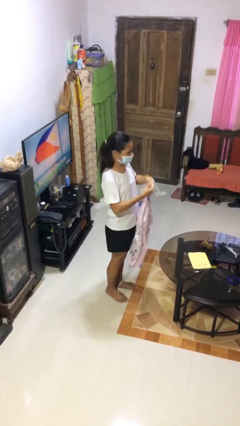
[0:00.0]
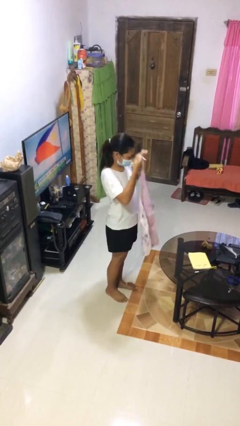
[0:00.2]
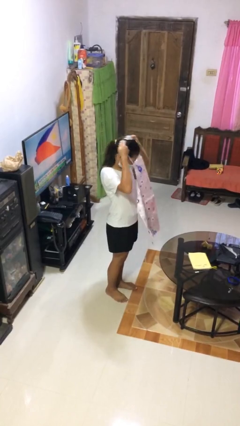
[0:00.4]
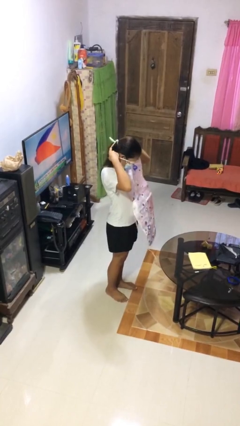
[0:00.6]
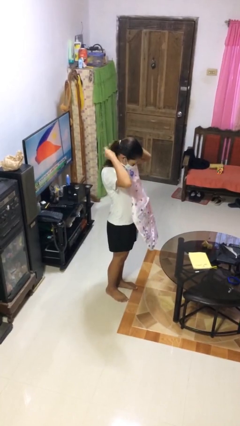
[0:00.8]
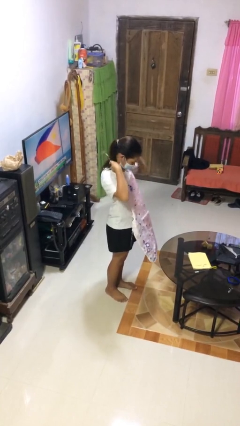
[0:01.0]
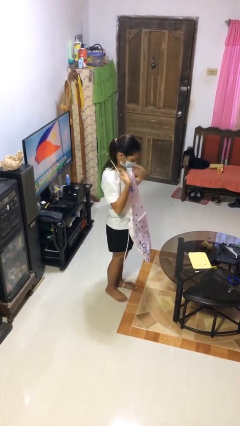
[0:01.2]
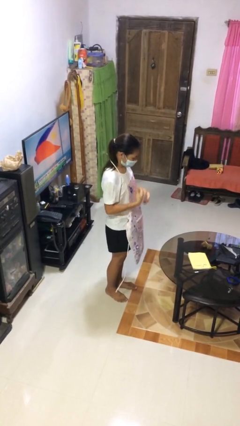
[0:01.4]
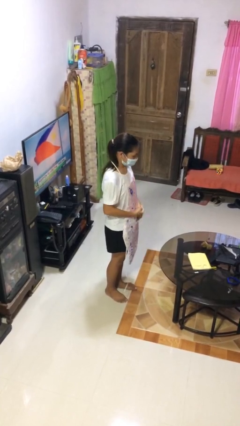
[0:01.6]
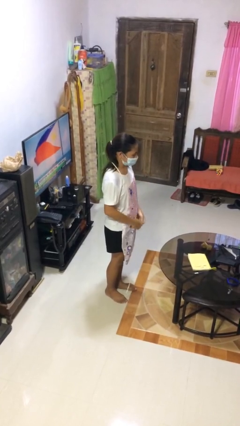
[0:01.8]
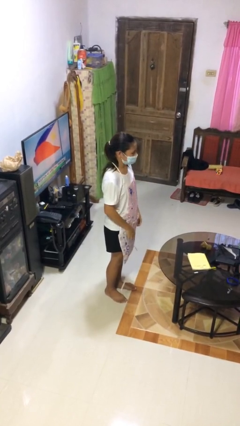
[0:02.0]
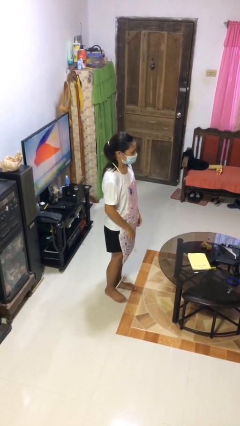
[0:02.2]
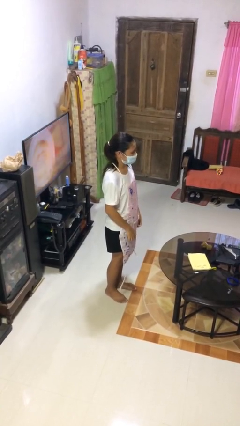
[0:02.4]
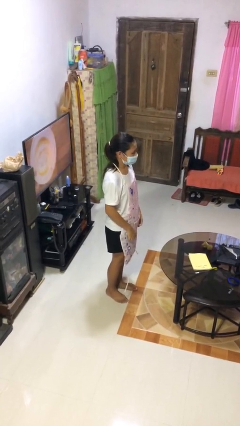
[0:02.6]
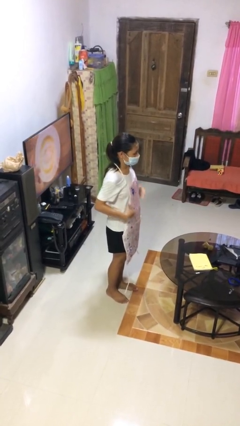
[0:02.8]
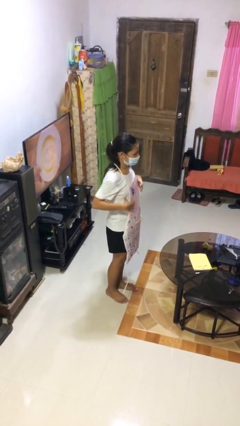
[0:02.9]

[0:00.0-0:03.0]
person puts on apron

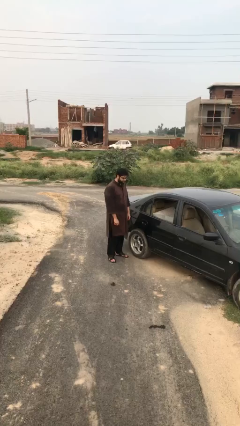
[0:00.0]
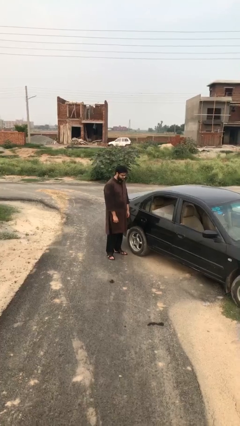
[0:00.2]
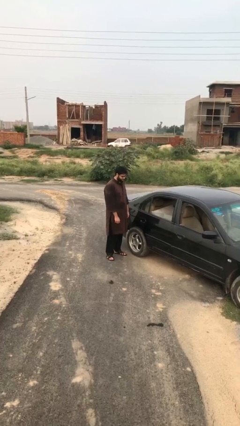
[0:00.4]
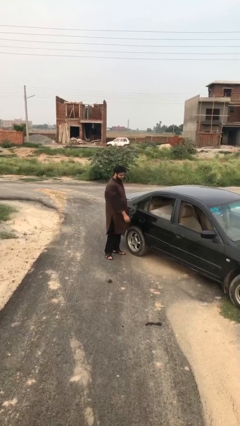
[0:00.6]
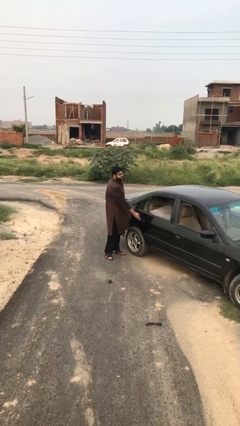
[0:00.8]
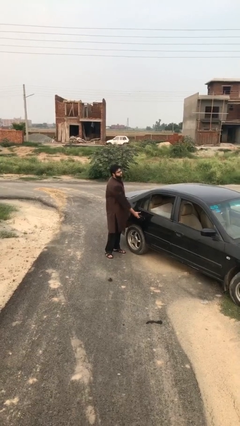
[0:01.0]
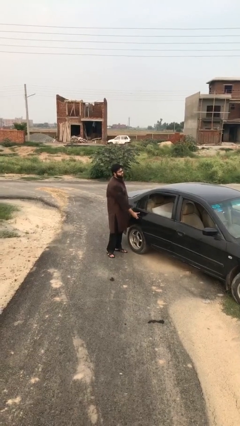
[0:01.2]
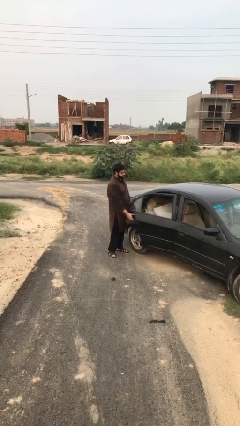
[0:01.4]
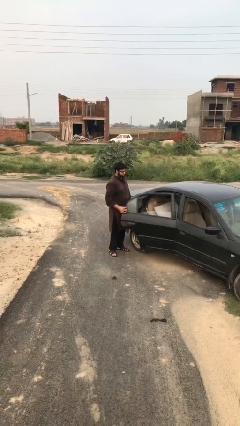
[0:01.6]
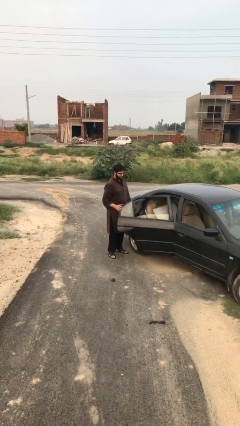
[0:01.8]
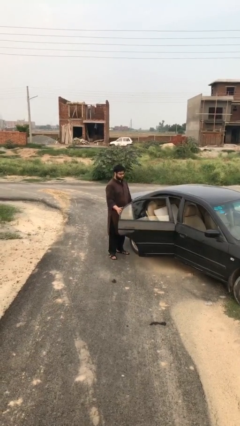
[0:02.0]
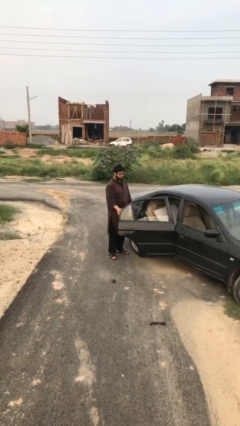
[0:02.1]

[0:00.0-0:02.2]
person opens car door

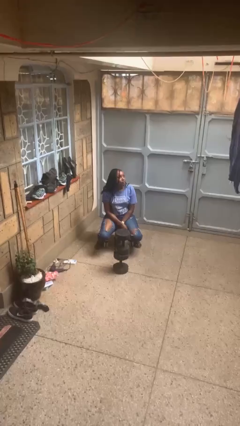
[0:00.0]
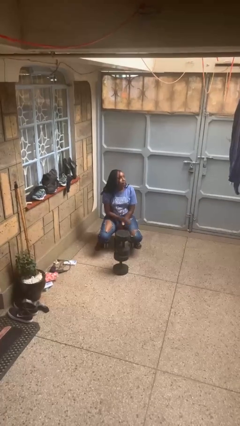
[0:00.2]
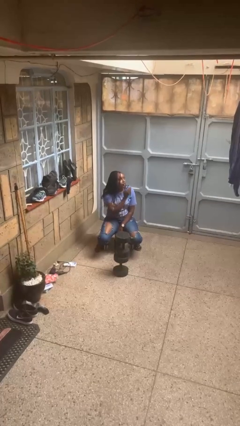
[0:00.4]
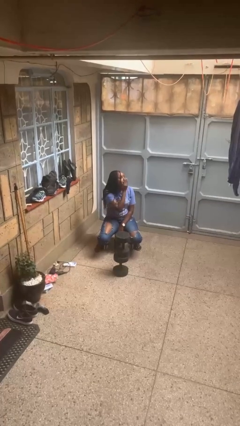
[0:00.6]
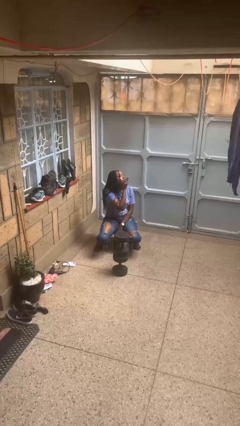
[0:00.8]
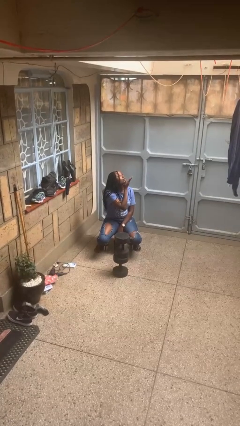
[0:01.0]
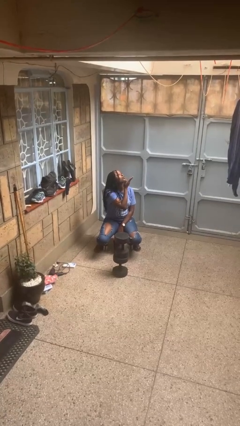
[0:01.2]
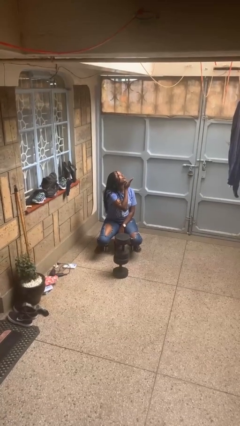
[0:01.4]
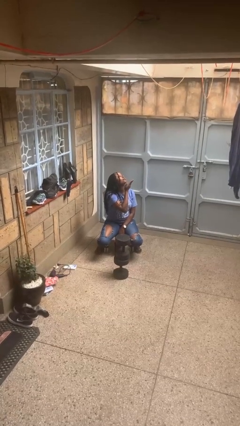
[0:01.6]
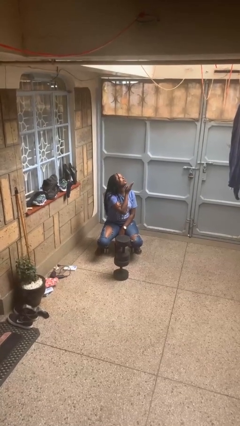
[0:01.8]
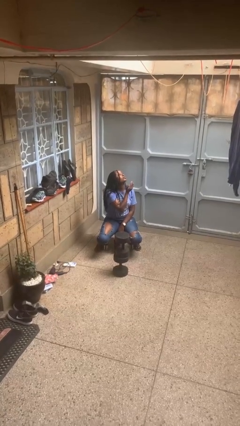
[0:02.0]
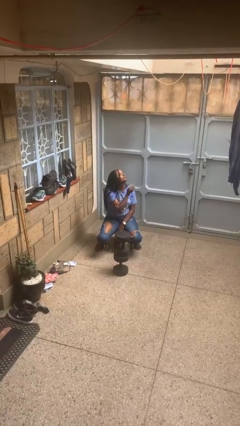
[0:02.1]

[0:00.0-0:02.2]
person gestures blow kiss

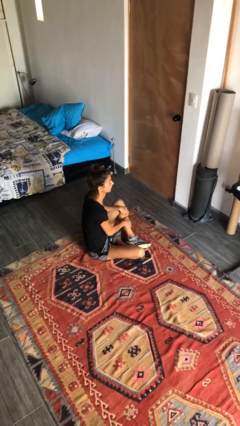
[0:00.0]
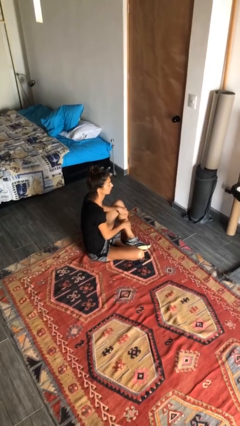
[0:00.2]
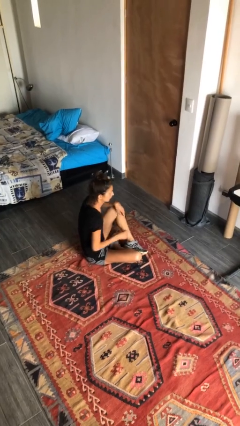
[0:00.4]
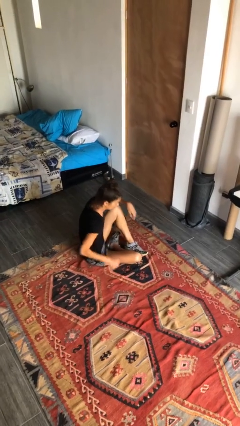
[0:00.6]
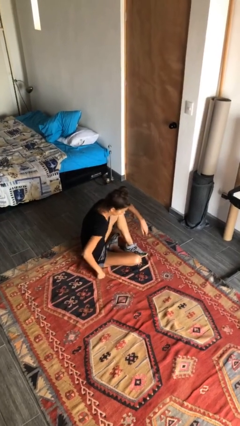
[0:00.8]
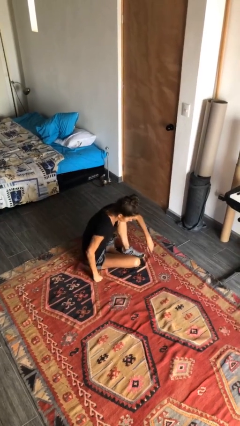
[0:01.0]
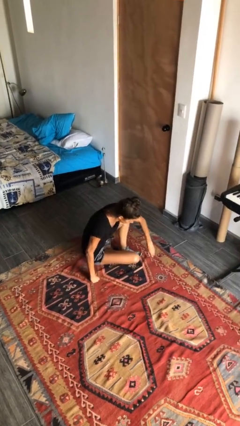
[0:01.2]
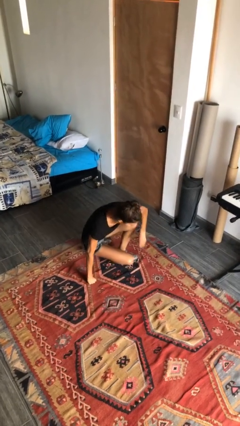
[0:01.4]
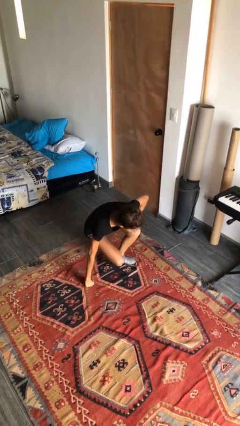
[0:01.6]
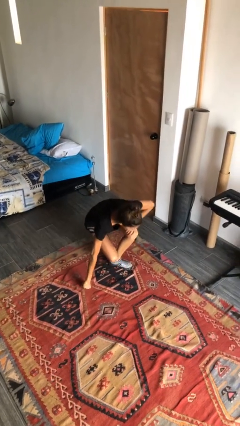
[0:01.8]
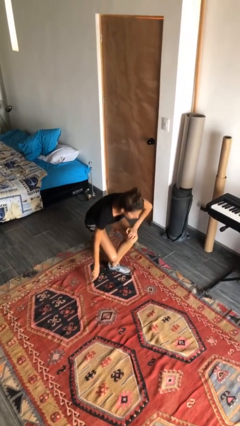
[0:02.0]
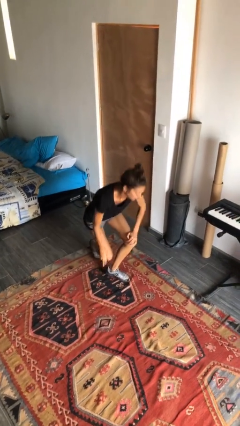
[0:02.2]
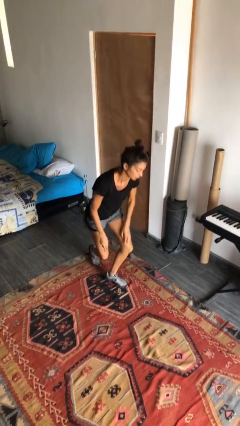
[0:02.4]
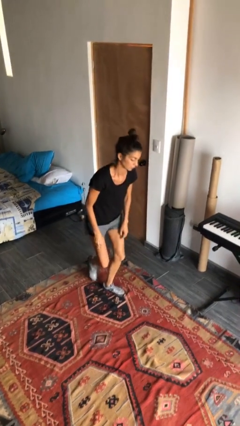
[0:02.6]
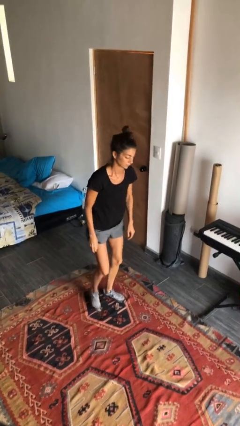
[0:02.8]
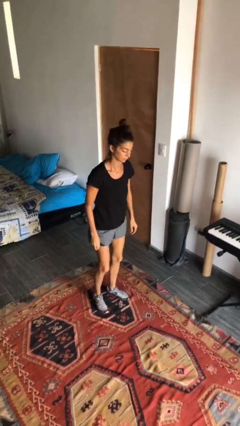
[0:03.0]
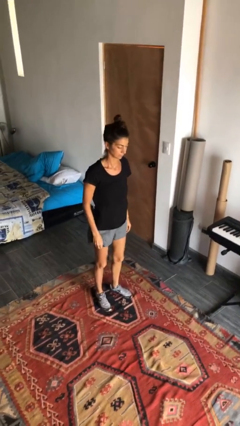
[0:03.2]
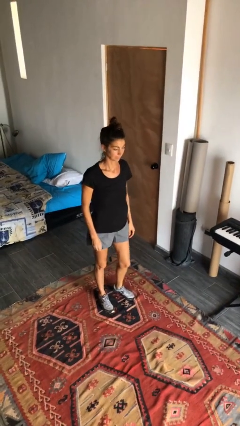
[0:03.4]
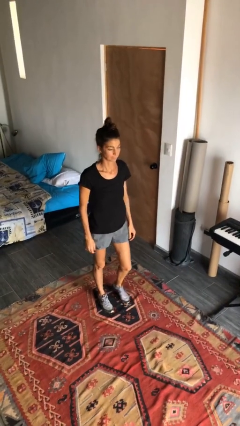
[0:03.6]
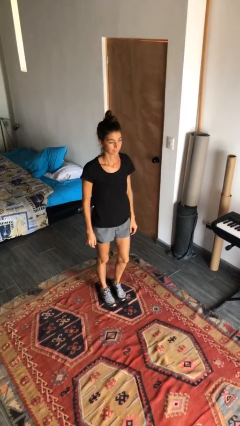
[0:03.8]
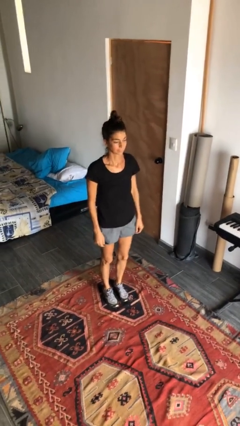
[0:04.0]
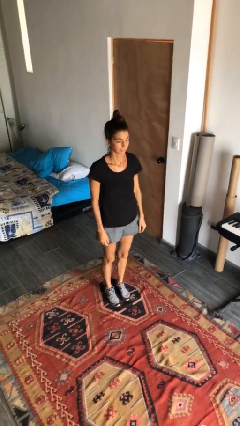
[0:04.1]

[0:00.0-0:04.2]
person stands up from floor

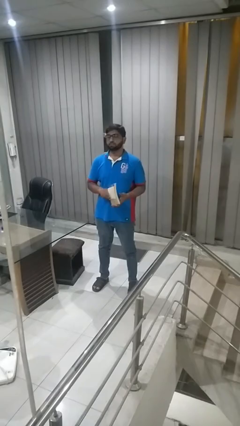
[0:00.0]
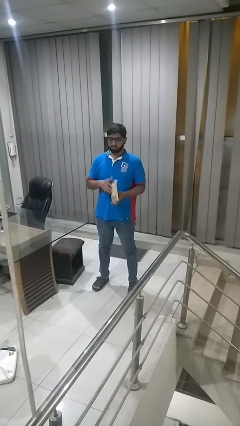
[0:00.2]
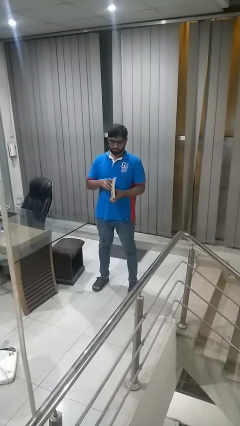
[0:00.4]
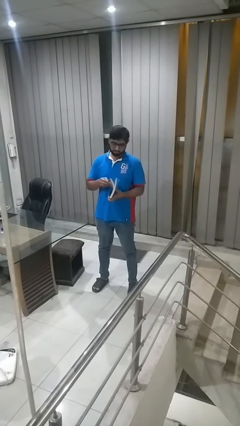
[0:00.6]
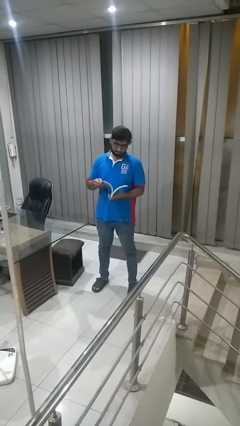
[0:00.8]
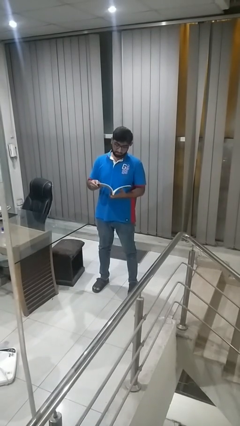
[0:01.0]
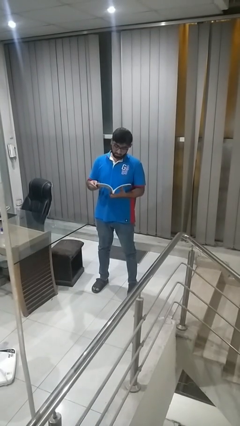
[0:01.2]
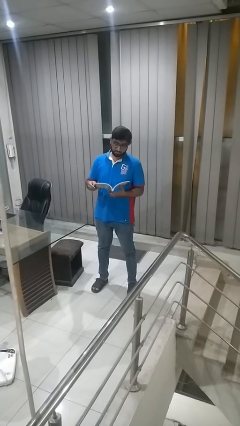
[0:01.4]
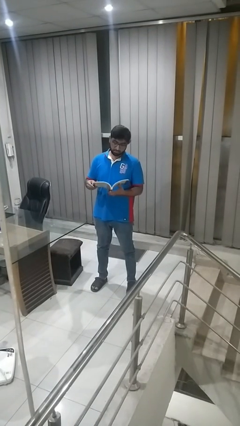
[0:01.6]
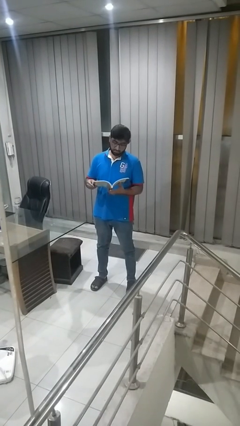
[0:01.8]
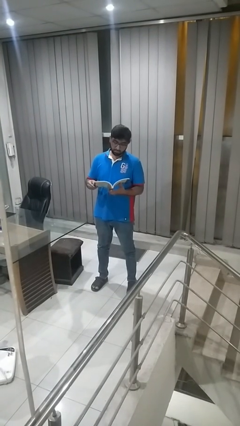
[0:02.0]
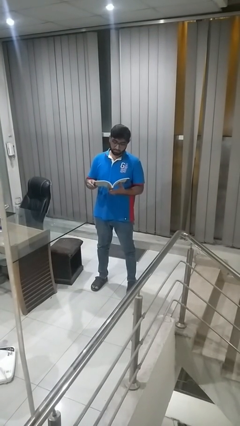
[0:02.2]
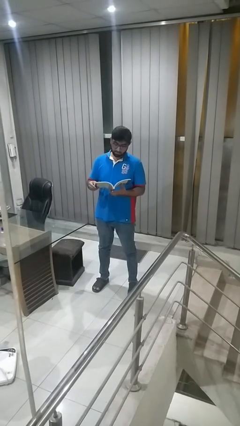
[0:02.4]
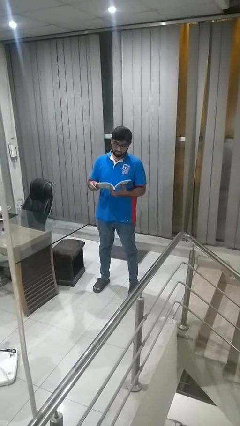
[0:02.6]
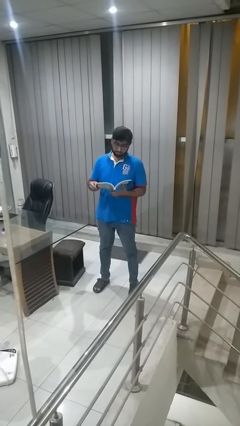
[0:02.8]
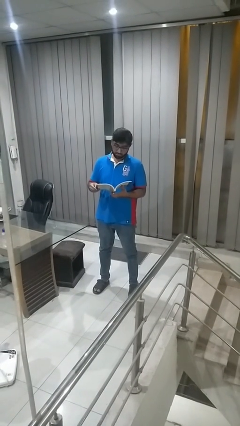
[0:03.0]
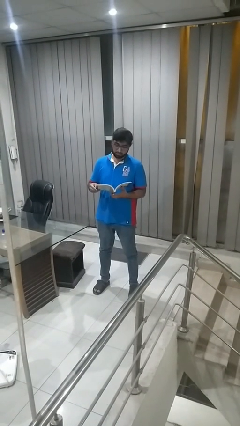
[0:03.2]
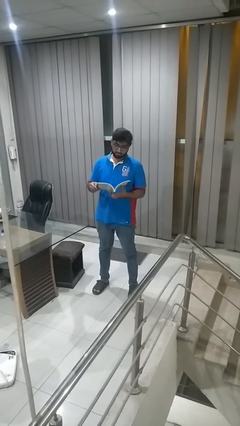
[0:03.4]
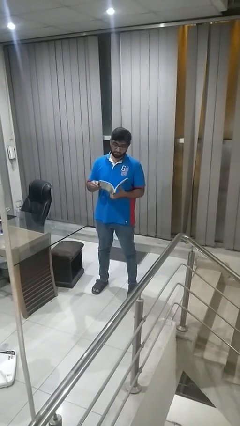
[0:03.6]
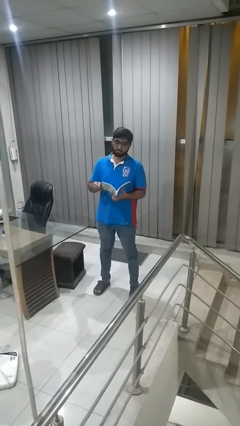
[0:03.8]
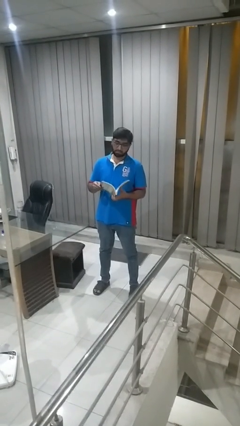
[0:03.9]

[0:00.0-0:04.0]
person reads book

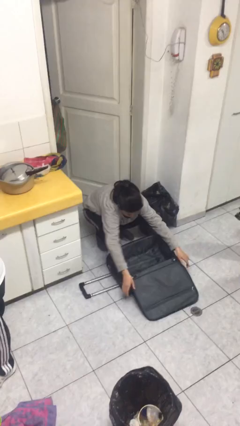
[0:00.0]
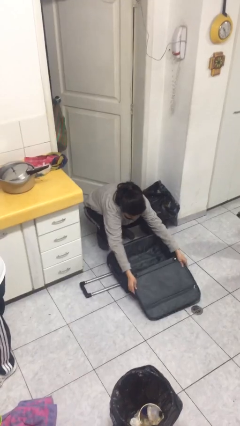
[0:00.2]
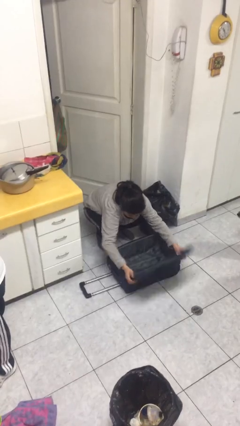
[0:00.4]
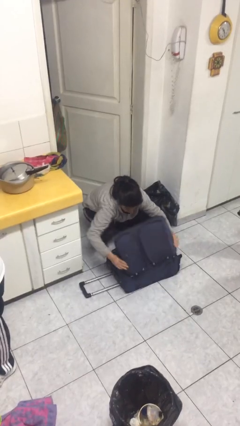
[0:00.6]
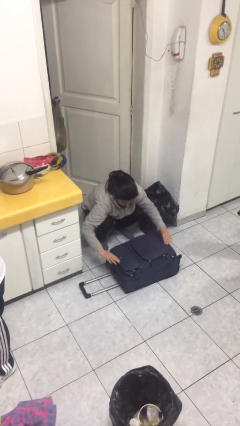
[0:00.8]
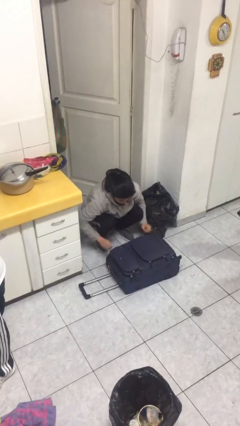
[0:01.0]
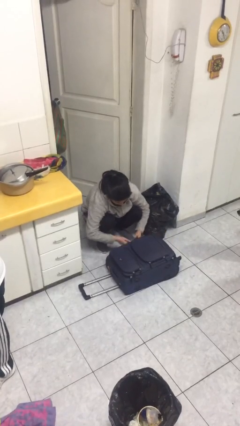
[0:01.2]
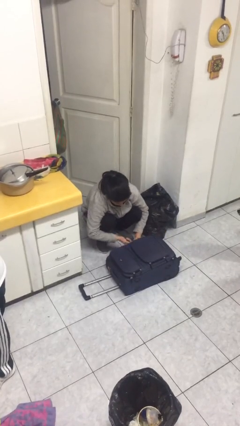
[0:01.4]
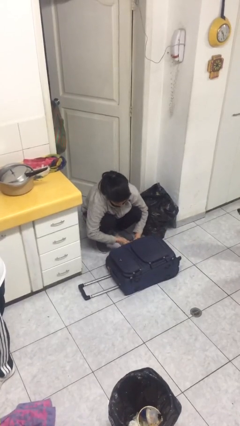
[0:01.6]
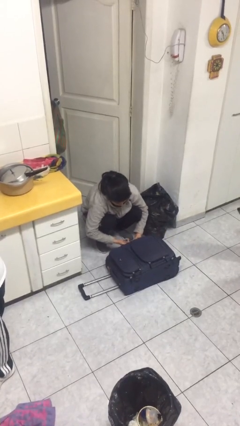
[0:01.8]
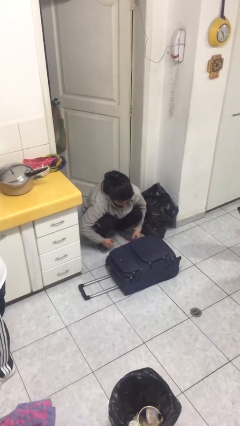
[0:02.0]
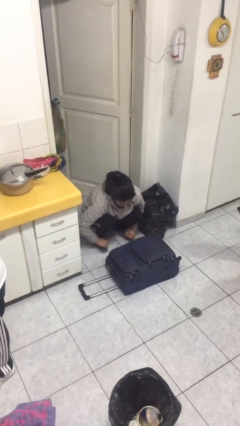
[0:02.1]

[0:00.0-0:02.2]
person closes suitcase
